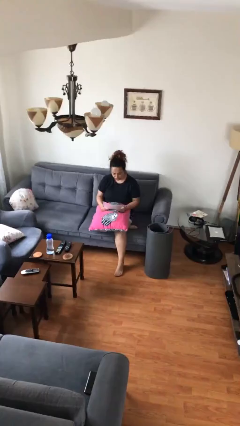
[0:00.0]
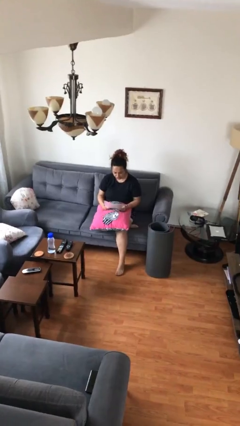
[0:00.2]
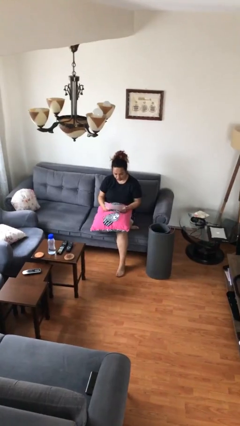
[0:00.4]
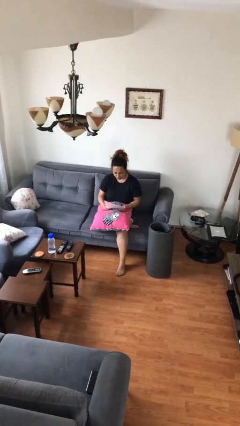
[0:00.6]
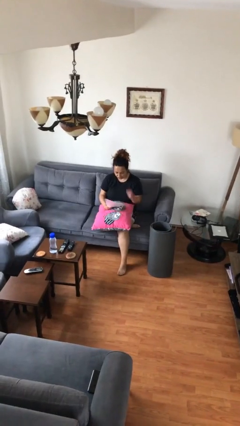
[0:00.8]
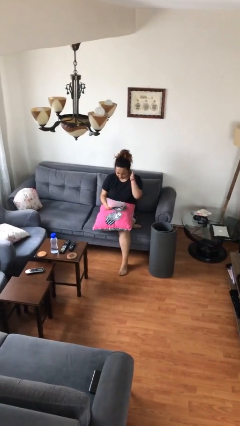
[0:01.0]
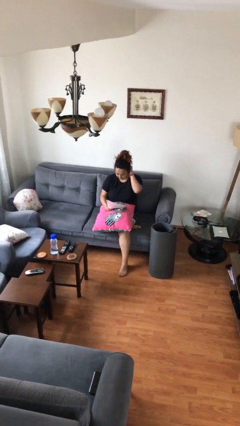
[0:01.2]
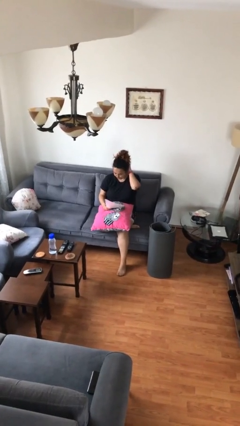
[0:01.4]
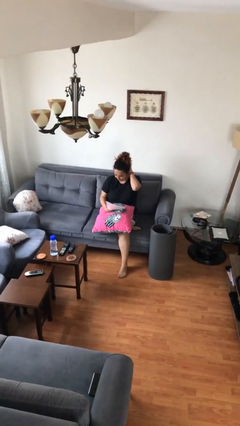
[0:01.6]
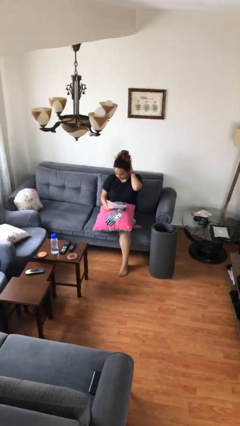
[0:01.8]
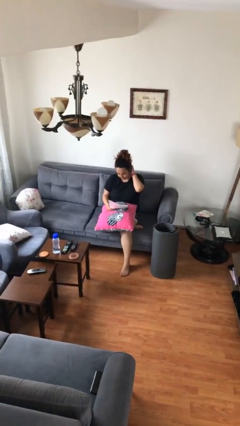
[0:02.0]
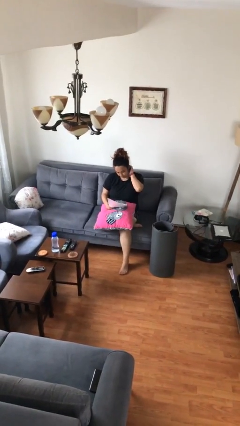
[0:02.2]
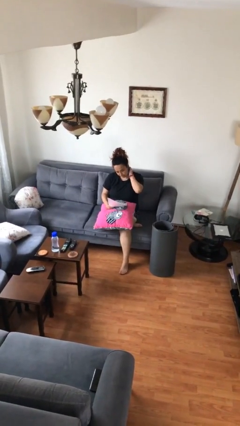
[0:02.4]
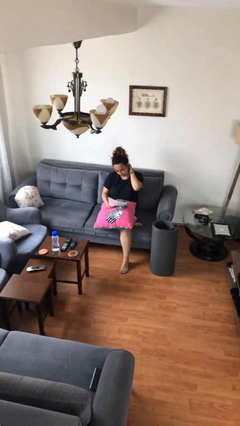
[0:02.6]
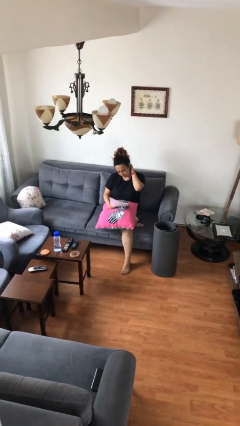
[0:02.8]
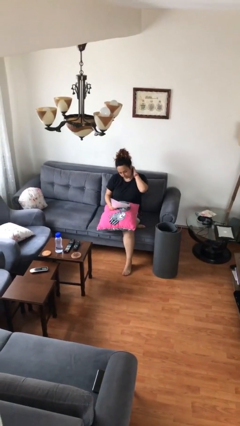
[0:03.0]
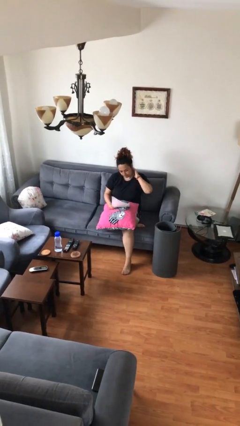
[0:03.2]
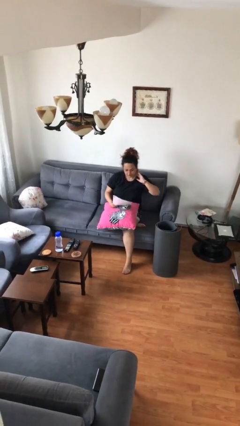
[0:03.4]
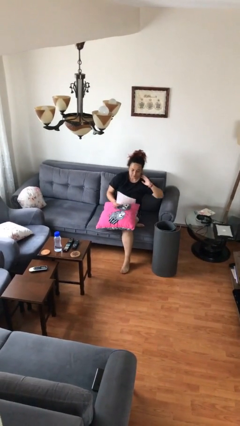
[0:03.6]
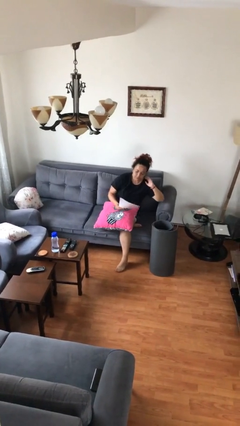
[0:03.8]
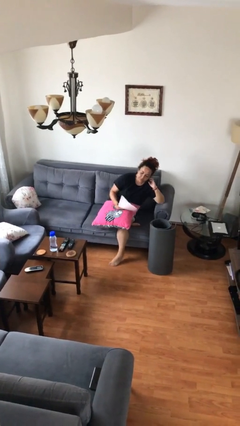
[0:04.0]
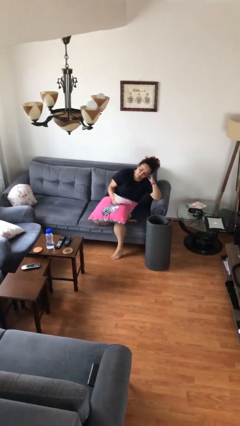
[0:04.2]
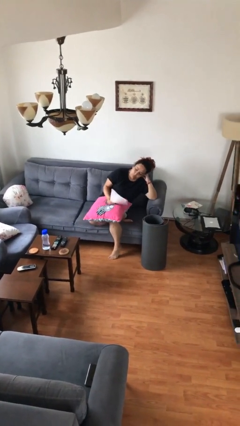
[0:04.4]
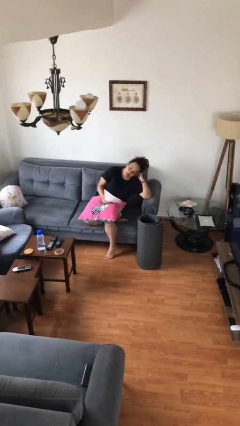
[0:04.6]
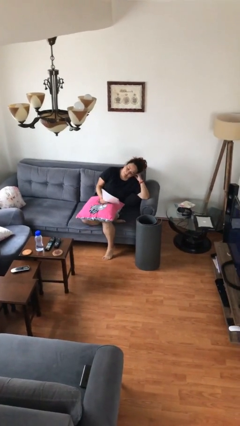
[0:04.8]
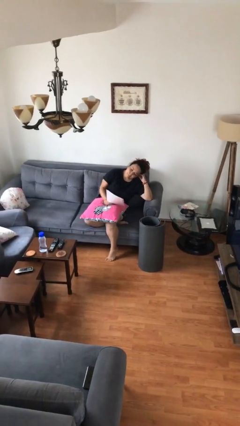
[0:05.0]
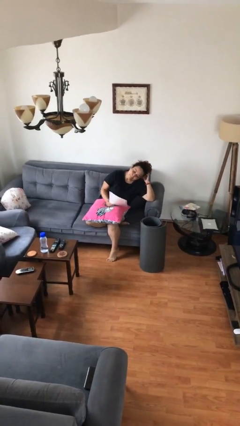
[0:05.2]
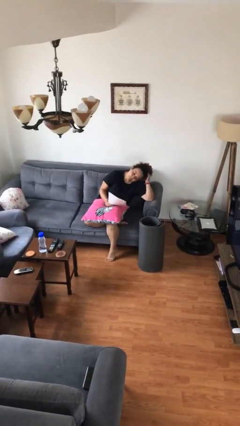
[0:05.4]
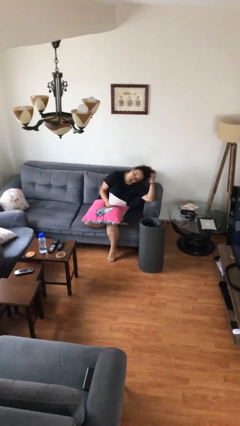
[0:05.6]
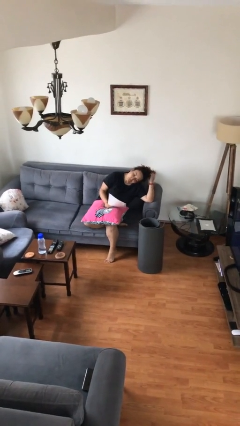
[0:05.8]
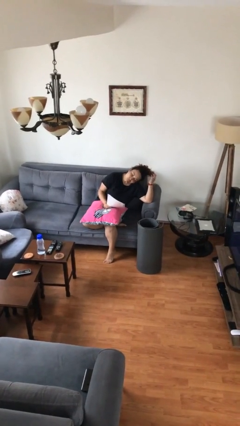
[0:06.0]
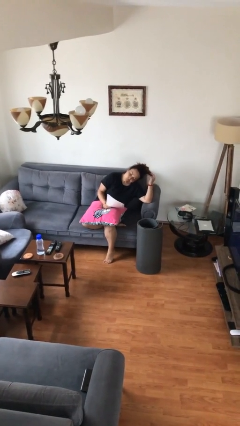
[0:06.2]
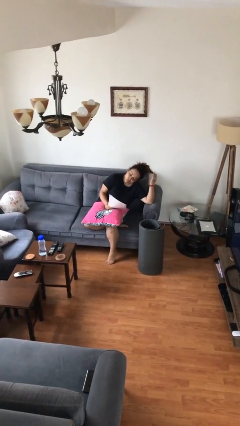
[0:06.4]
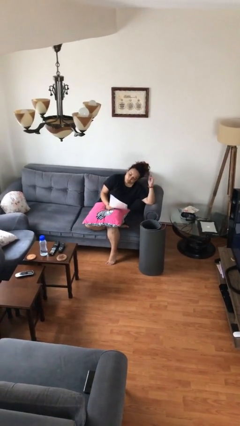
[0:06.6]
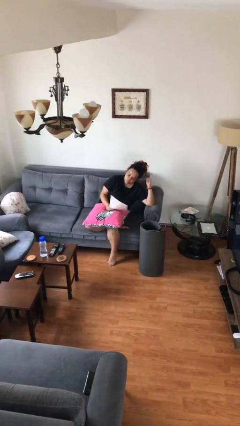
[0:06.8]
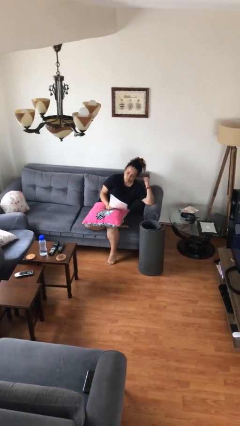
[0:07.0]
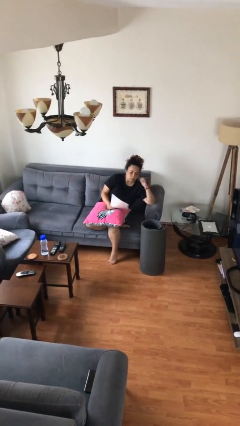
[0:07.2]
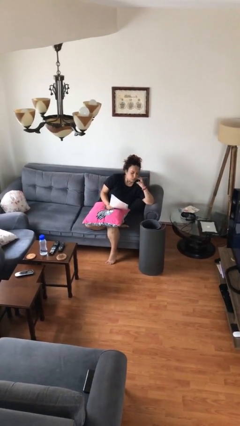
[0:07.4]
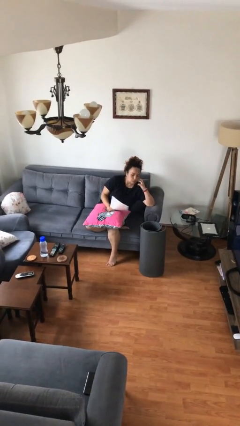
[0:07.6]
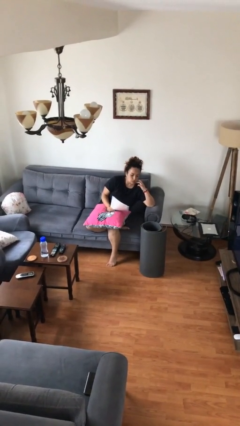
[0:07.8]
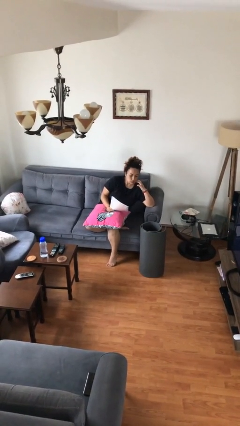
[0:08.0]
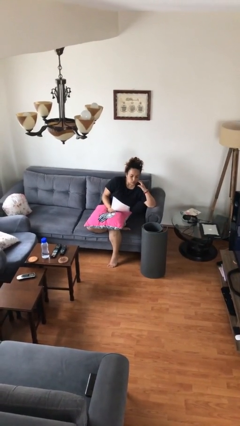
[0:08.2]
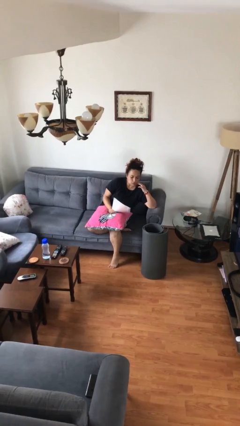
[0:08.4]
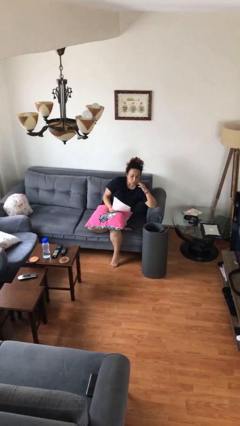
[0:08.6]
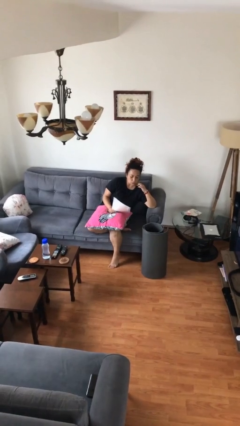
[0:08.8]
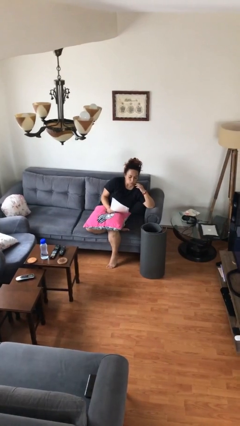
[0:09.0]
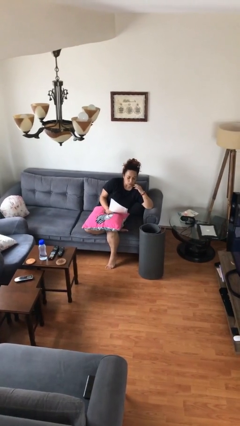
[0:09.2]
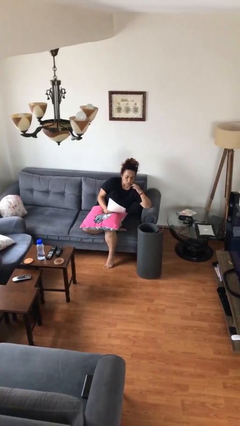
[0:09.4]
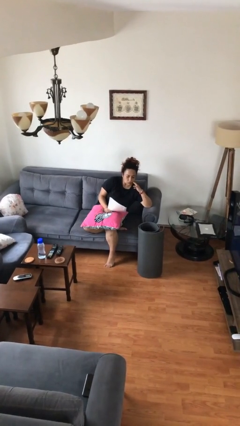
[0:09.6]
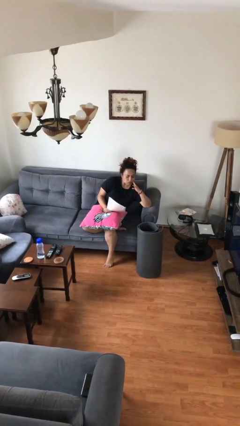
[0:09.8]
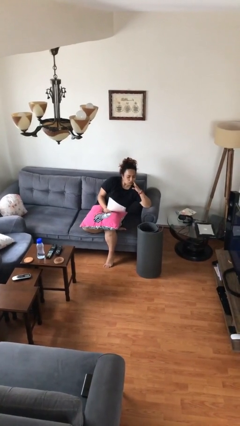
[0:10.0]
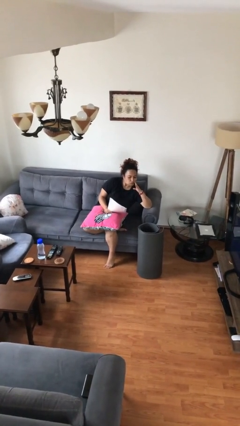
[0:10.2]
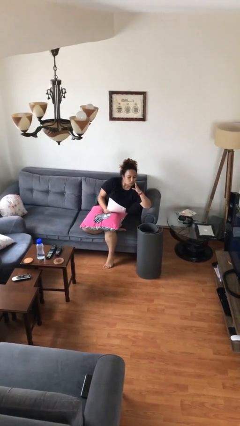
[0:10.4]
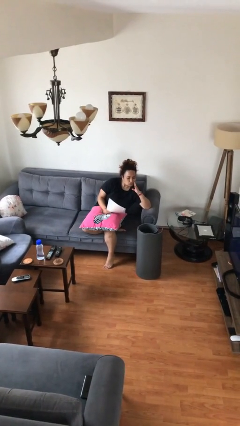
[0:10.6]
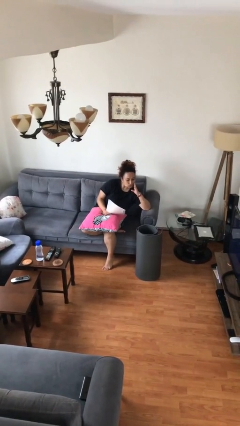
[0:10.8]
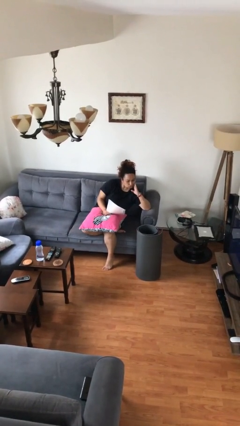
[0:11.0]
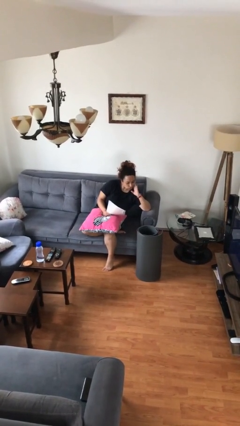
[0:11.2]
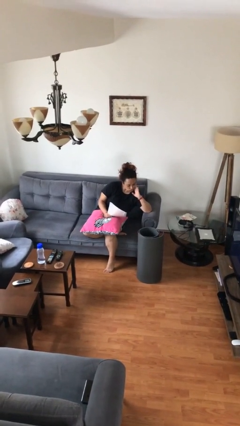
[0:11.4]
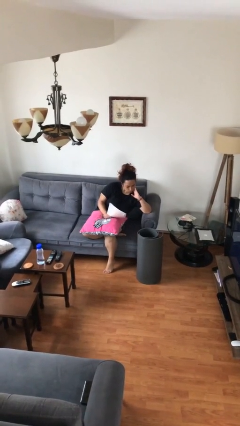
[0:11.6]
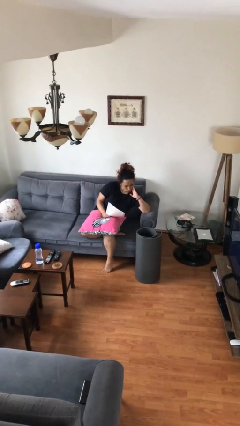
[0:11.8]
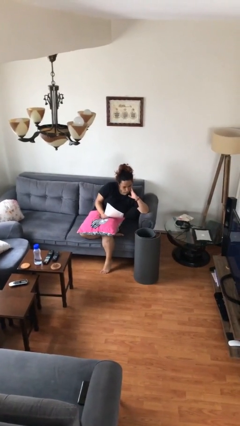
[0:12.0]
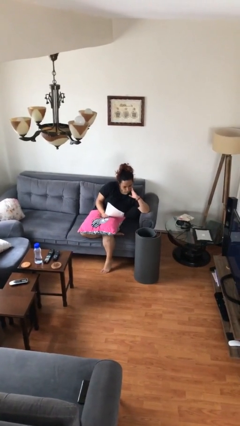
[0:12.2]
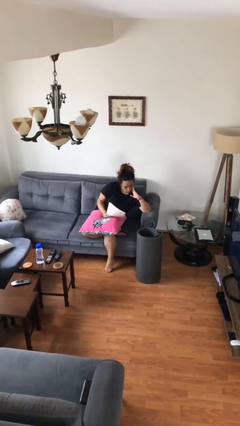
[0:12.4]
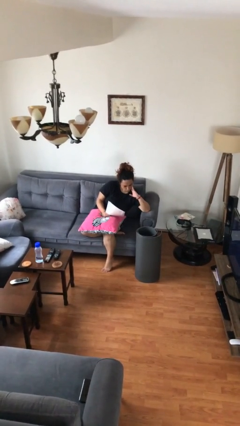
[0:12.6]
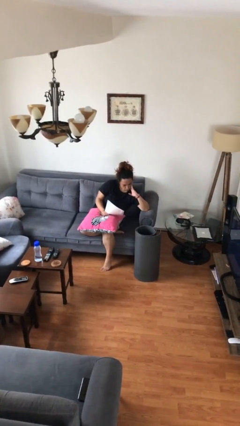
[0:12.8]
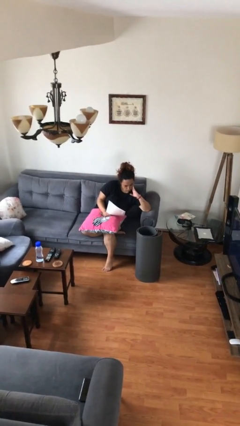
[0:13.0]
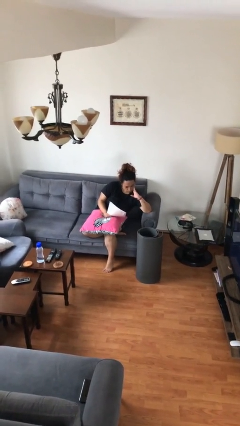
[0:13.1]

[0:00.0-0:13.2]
person reads document

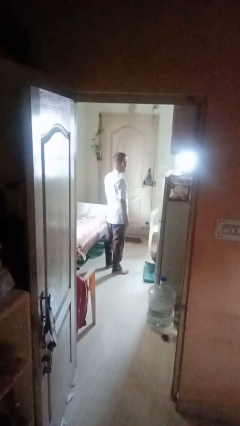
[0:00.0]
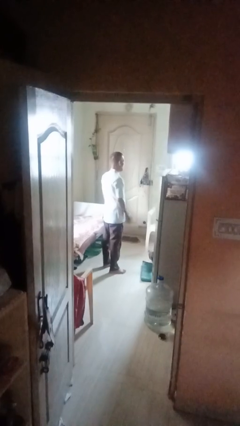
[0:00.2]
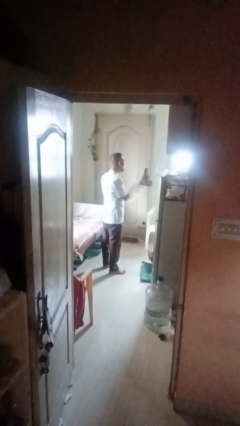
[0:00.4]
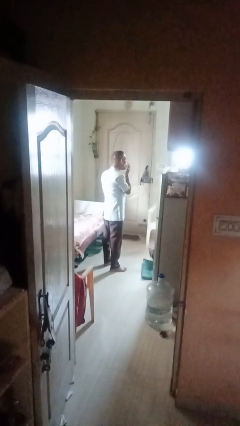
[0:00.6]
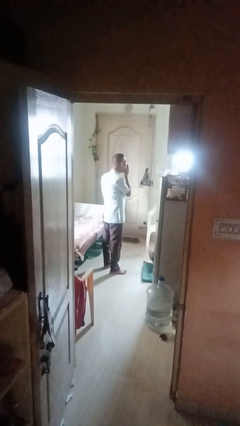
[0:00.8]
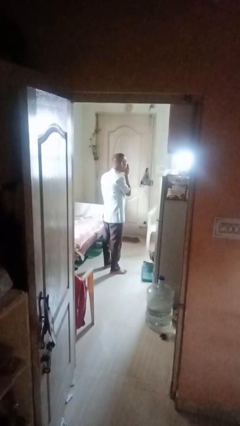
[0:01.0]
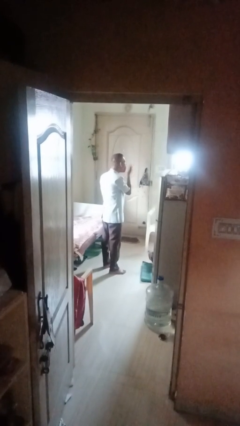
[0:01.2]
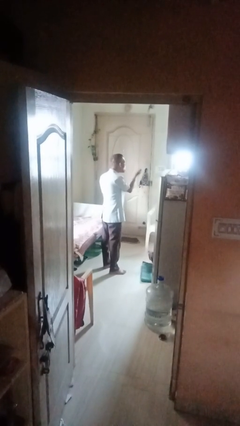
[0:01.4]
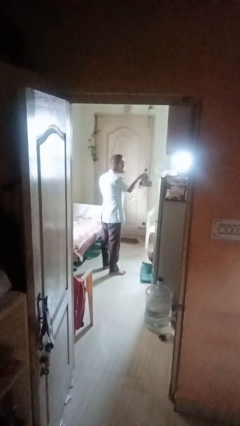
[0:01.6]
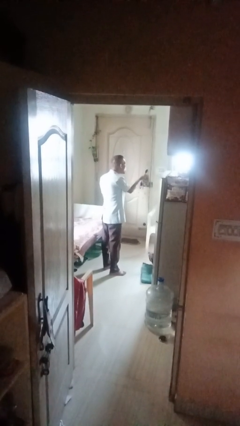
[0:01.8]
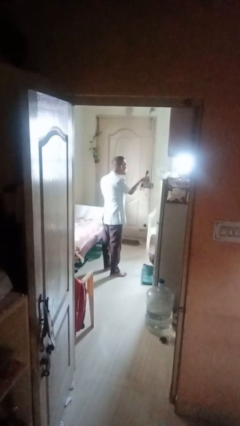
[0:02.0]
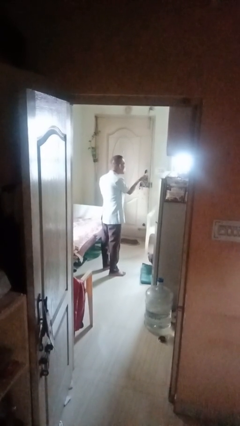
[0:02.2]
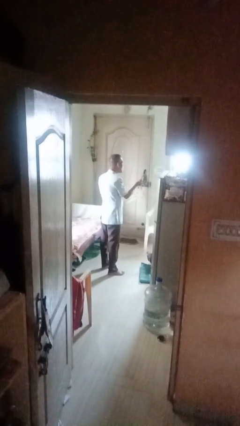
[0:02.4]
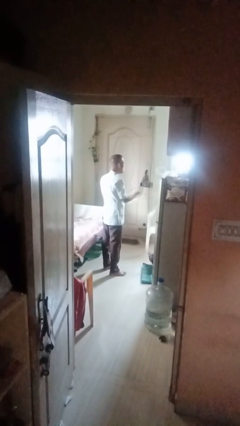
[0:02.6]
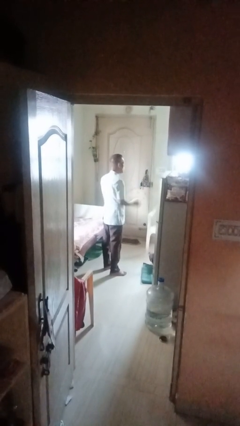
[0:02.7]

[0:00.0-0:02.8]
person gestures blow kiss

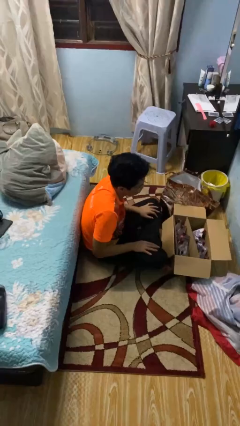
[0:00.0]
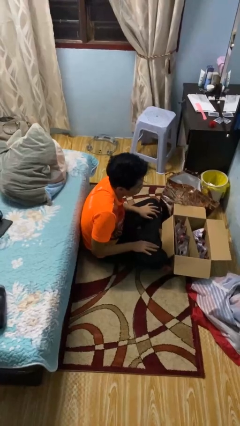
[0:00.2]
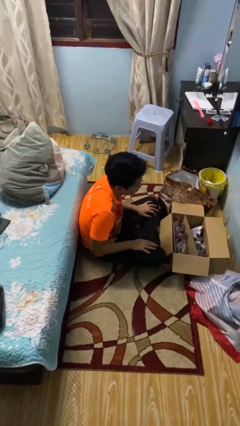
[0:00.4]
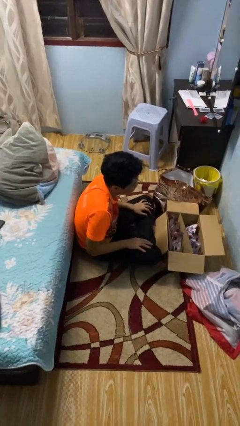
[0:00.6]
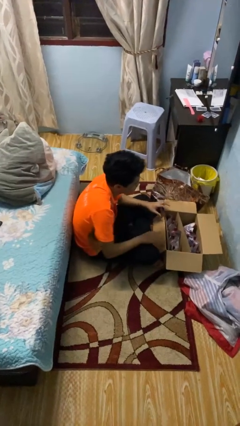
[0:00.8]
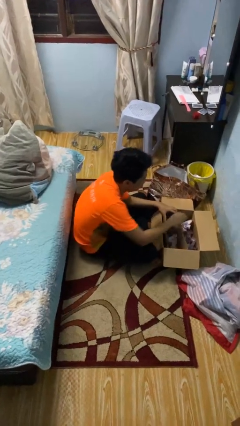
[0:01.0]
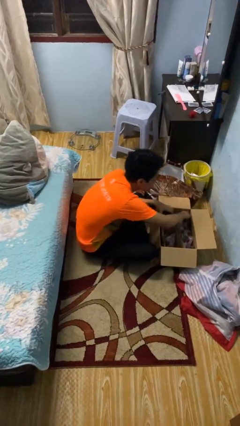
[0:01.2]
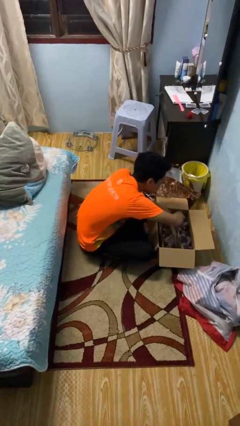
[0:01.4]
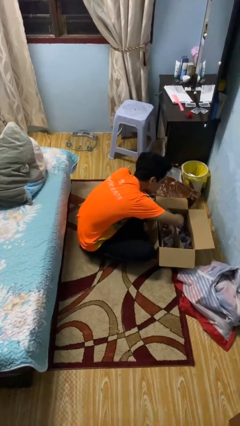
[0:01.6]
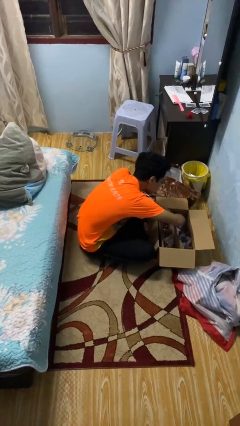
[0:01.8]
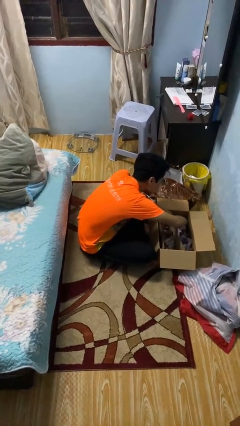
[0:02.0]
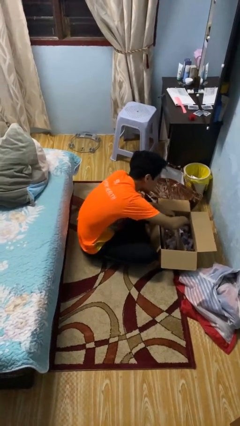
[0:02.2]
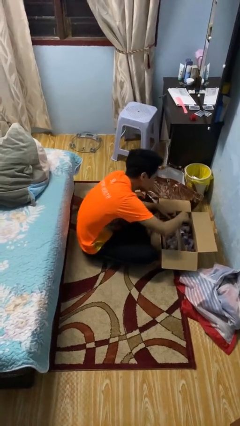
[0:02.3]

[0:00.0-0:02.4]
person searches in bag
